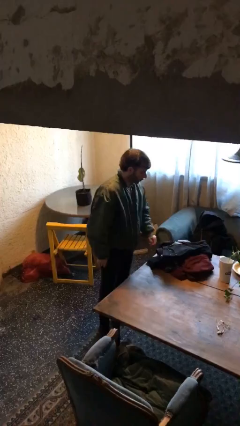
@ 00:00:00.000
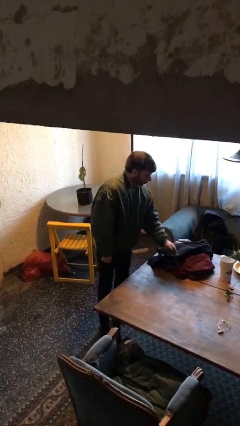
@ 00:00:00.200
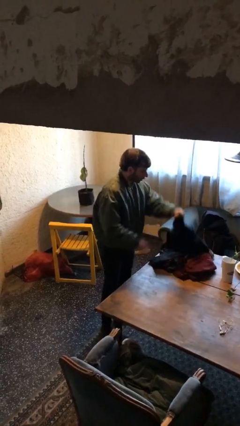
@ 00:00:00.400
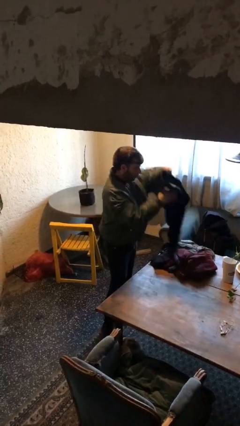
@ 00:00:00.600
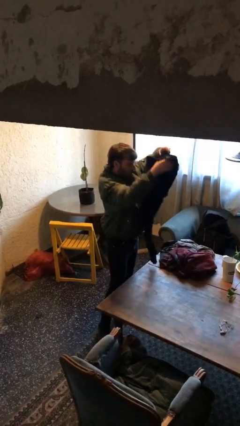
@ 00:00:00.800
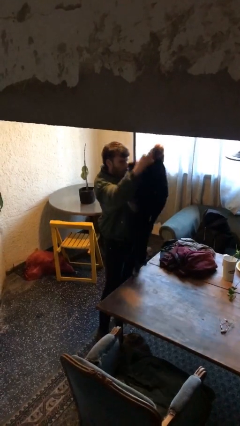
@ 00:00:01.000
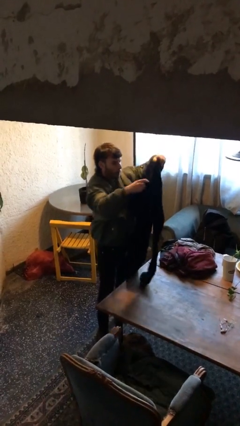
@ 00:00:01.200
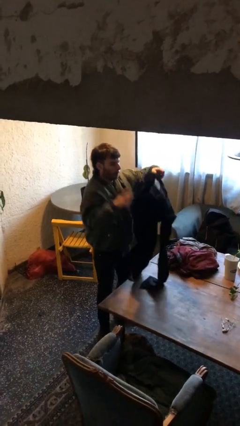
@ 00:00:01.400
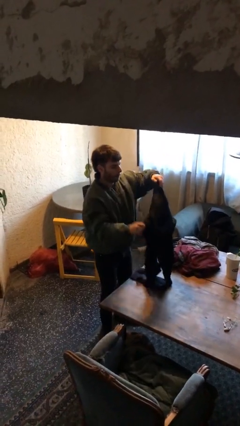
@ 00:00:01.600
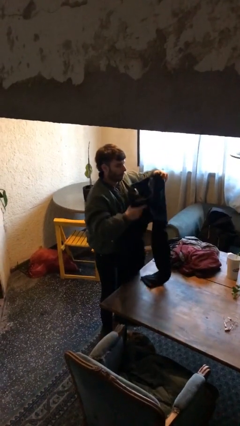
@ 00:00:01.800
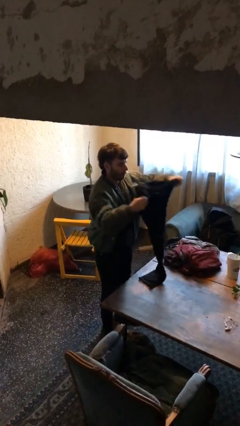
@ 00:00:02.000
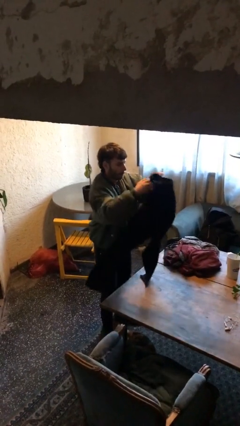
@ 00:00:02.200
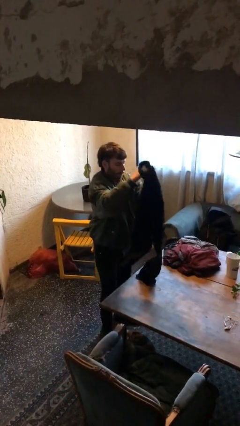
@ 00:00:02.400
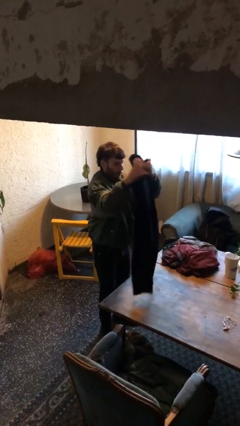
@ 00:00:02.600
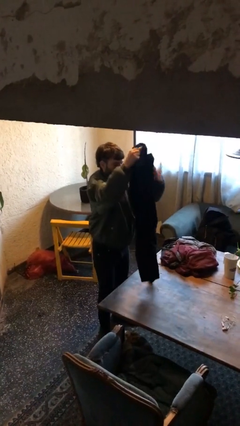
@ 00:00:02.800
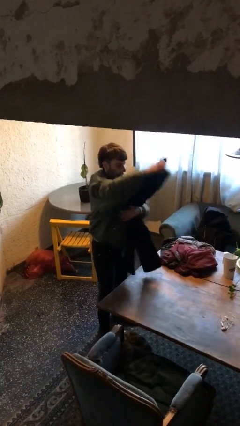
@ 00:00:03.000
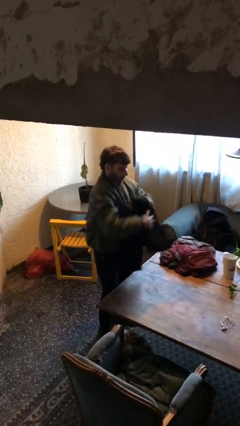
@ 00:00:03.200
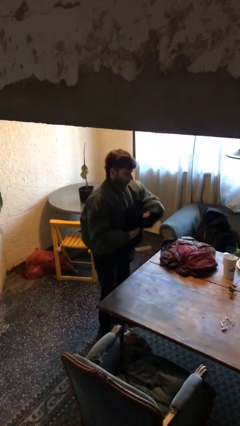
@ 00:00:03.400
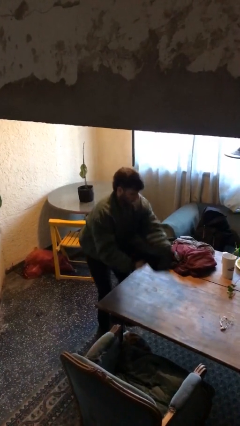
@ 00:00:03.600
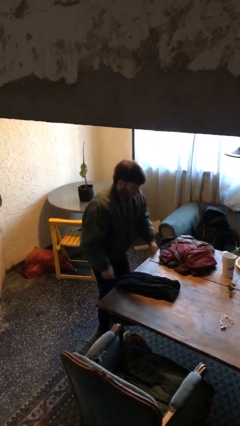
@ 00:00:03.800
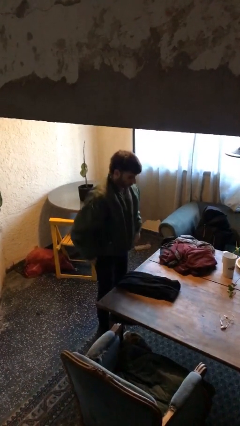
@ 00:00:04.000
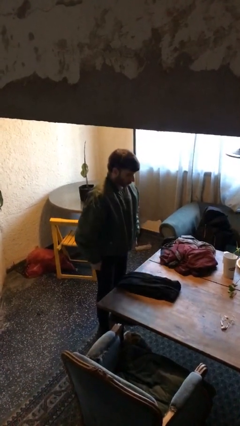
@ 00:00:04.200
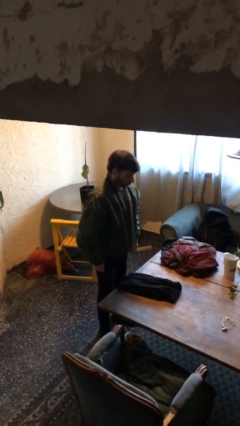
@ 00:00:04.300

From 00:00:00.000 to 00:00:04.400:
person folds pants

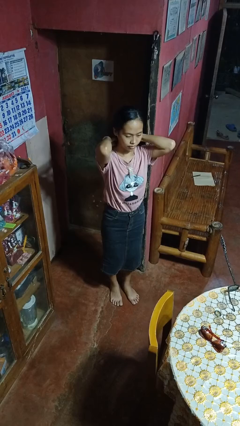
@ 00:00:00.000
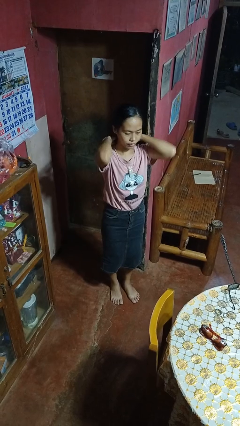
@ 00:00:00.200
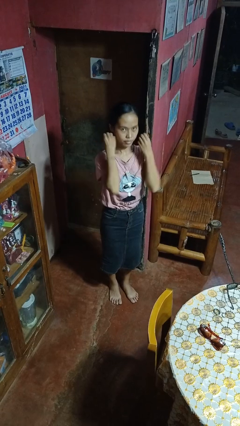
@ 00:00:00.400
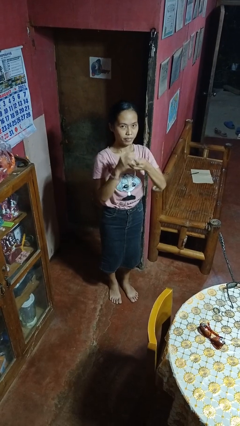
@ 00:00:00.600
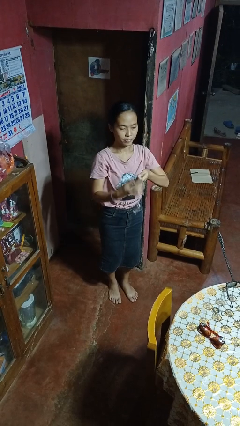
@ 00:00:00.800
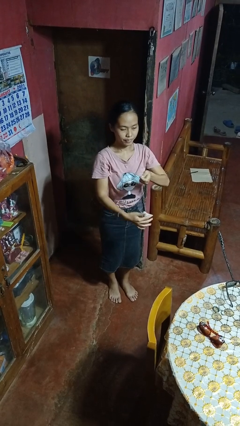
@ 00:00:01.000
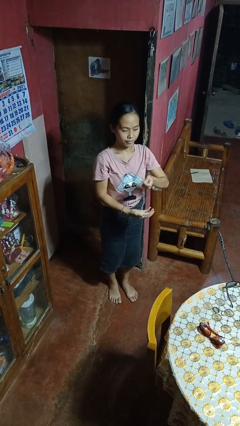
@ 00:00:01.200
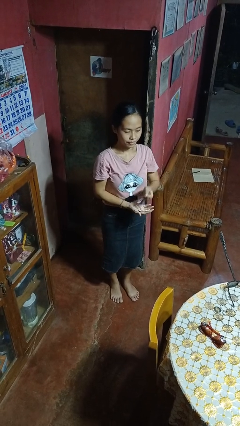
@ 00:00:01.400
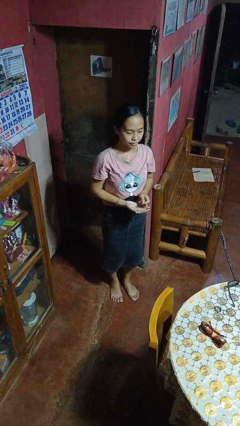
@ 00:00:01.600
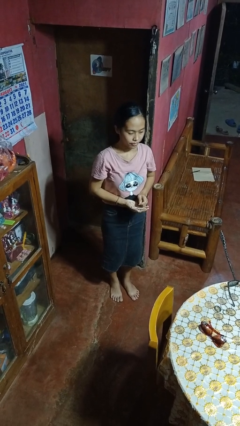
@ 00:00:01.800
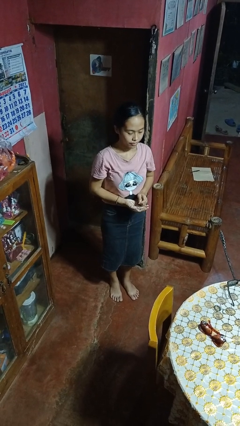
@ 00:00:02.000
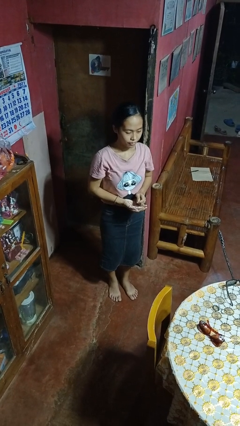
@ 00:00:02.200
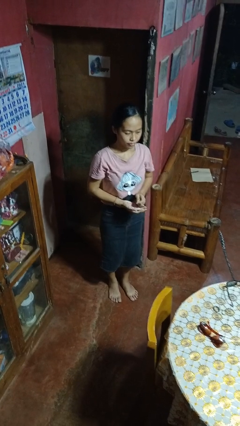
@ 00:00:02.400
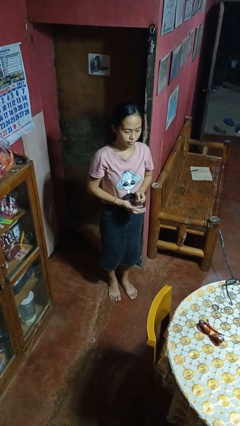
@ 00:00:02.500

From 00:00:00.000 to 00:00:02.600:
person takes off necklace

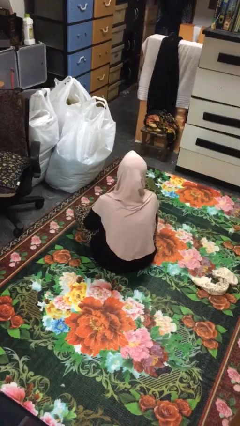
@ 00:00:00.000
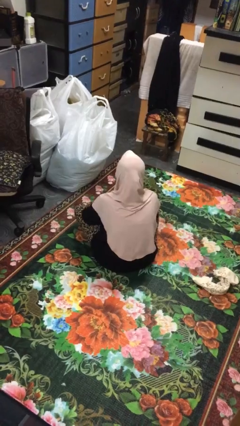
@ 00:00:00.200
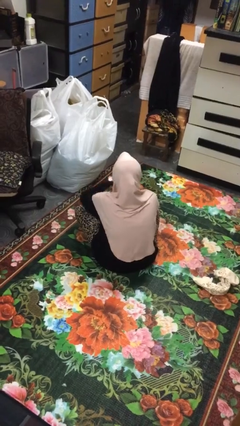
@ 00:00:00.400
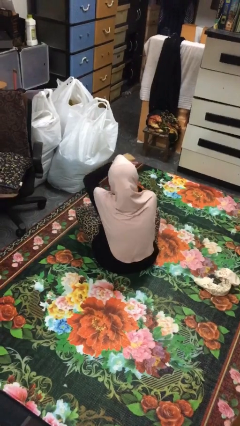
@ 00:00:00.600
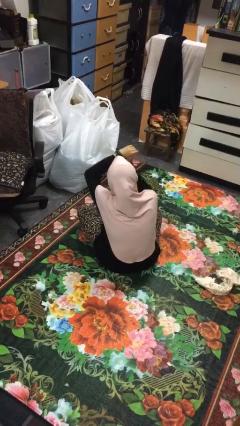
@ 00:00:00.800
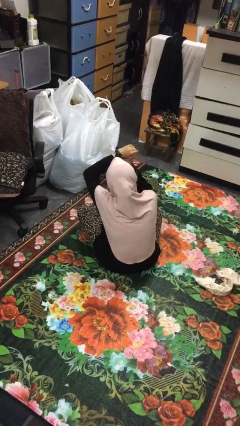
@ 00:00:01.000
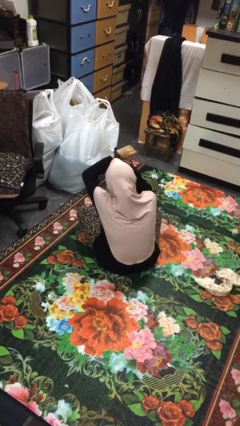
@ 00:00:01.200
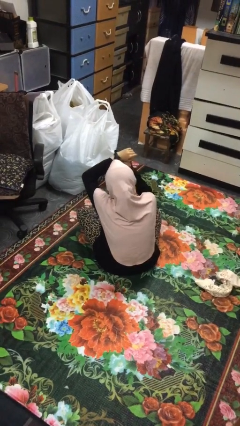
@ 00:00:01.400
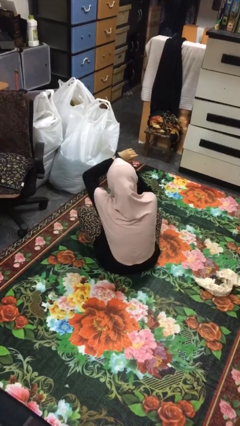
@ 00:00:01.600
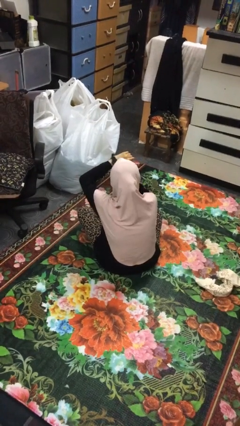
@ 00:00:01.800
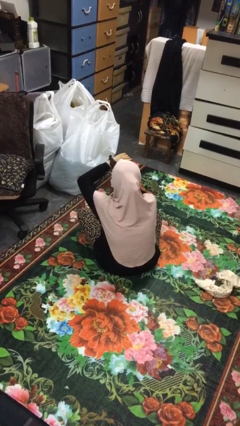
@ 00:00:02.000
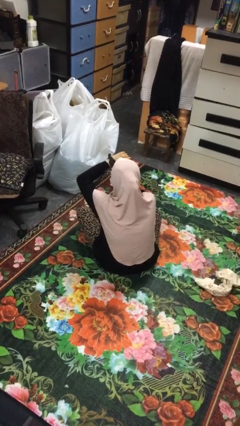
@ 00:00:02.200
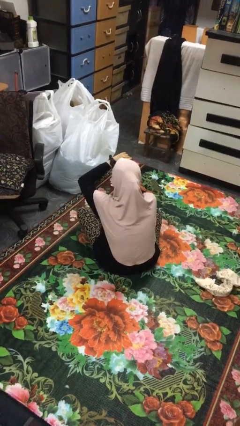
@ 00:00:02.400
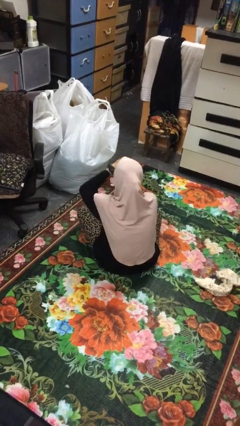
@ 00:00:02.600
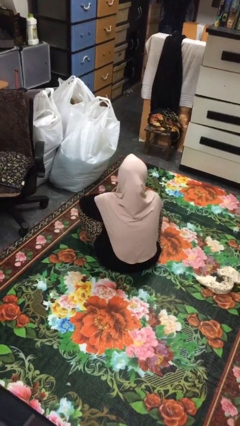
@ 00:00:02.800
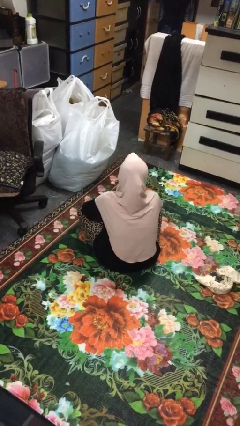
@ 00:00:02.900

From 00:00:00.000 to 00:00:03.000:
person looks at wristwatch

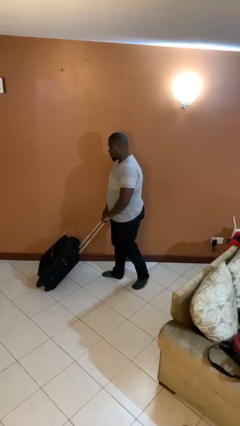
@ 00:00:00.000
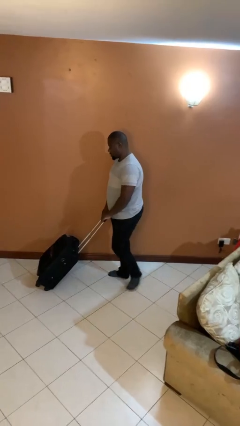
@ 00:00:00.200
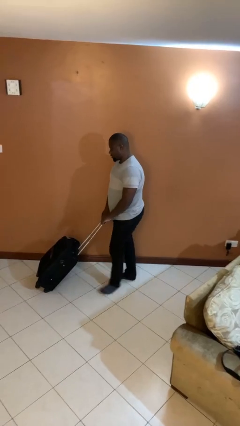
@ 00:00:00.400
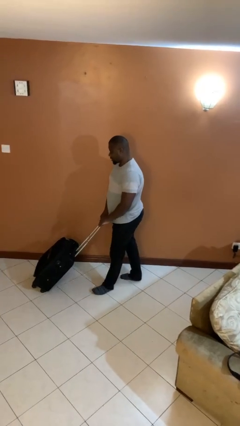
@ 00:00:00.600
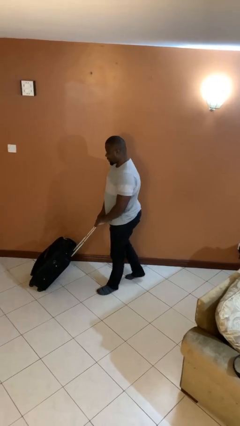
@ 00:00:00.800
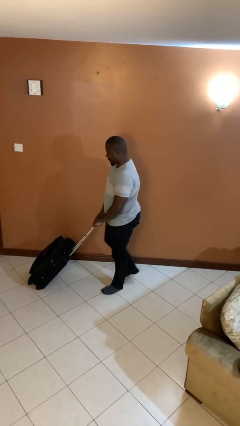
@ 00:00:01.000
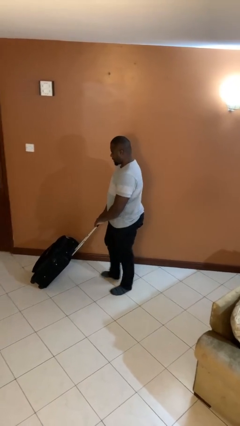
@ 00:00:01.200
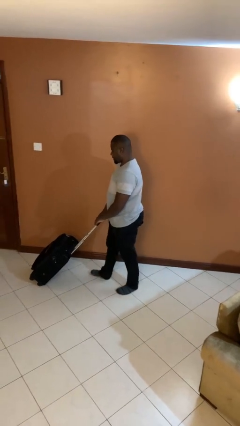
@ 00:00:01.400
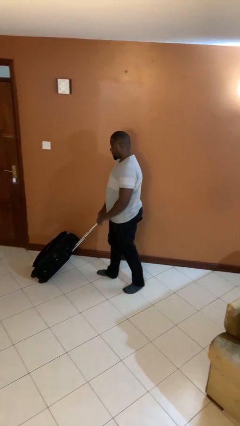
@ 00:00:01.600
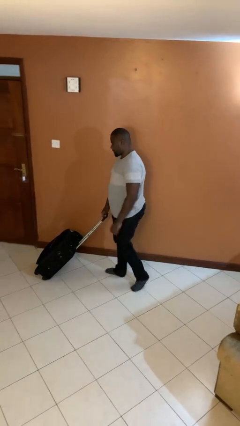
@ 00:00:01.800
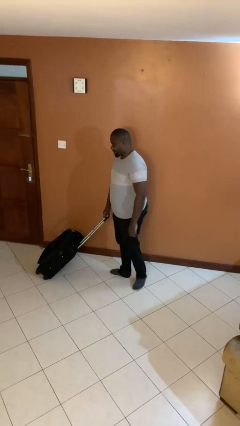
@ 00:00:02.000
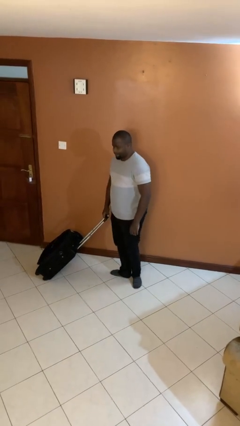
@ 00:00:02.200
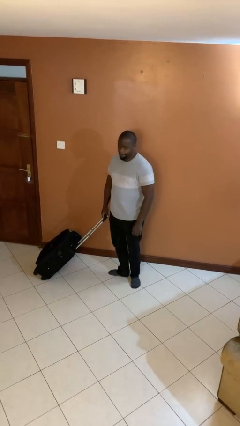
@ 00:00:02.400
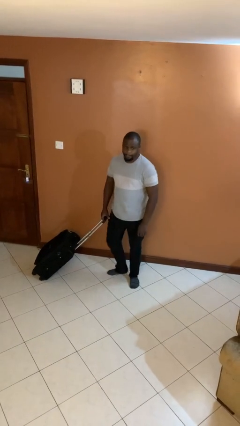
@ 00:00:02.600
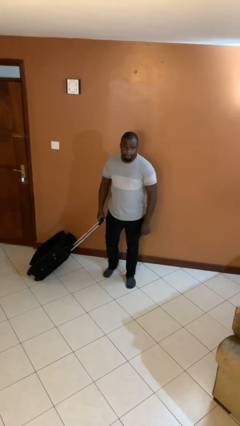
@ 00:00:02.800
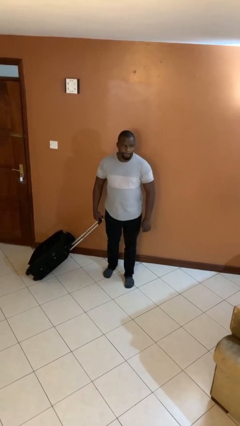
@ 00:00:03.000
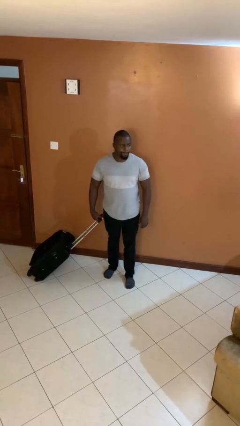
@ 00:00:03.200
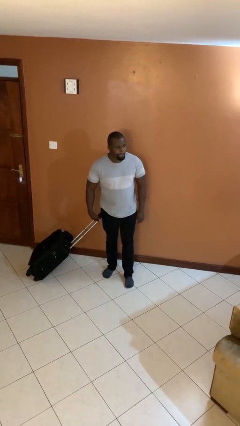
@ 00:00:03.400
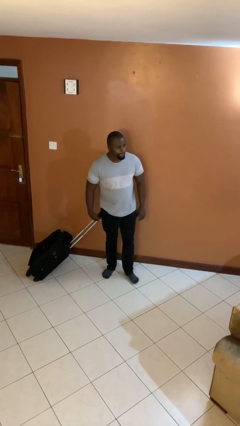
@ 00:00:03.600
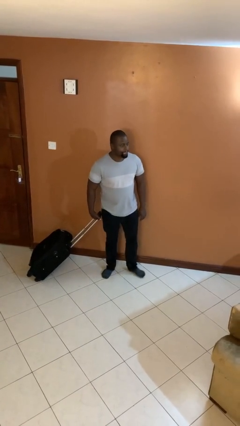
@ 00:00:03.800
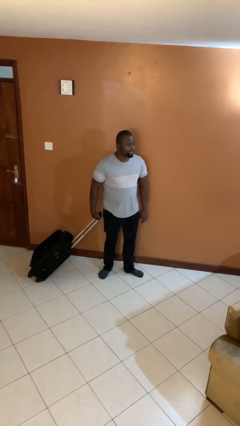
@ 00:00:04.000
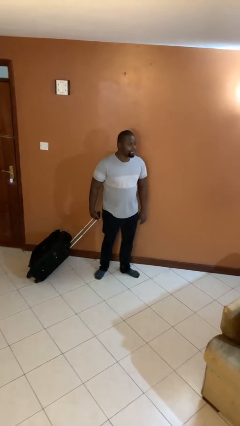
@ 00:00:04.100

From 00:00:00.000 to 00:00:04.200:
person pushes wheeled cart

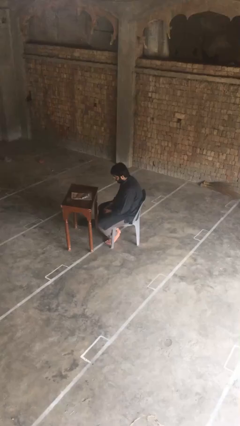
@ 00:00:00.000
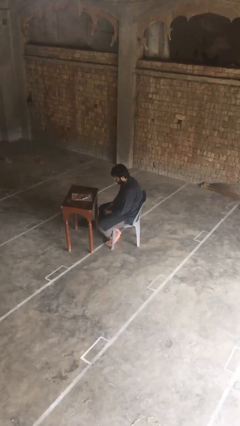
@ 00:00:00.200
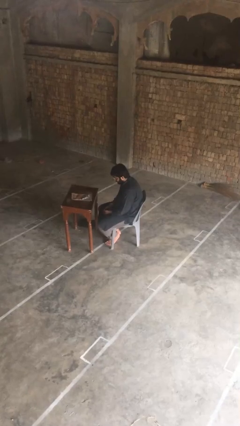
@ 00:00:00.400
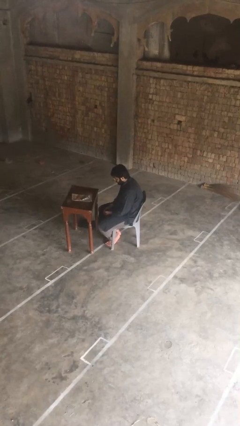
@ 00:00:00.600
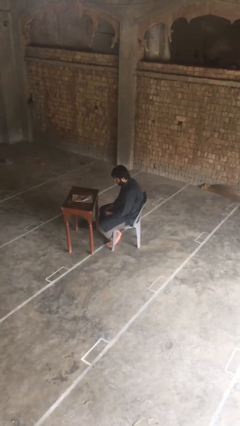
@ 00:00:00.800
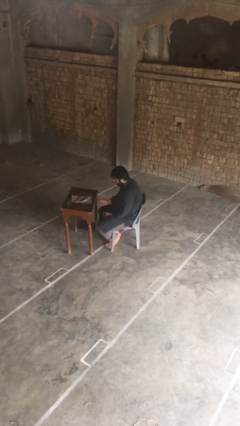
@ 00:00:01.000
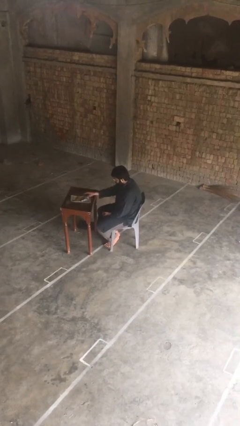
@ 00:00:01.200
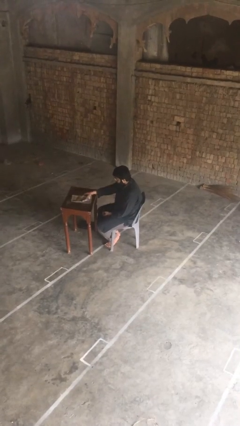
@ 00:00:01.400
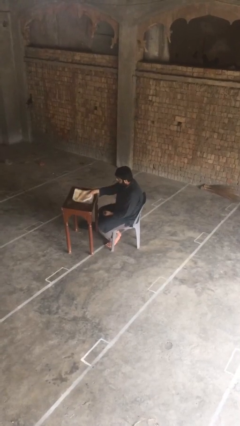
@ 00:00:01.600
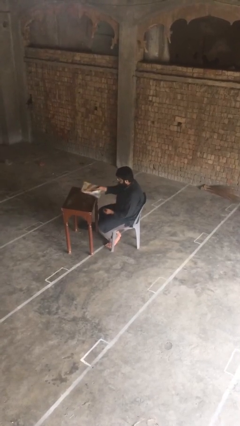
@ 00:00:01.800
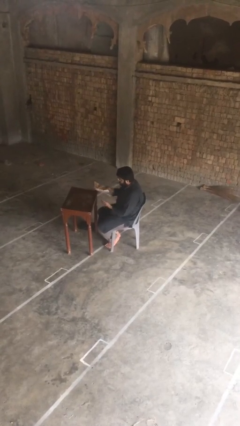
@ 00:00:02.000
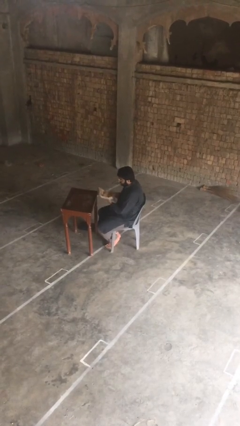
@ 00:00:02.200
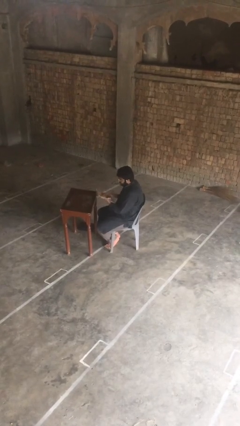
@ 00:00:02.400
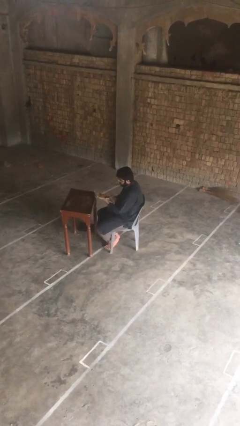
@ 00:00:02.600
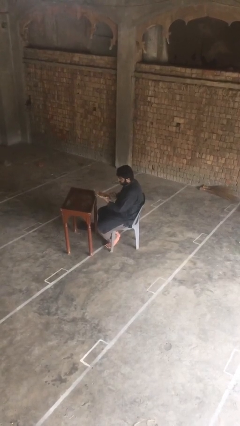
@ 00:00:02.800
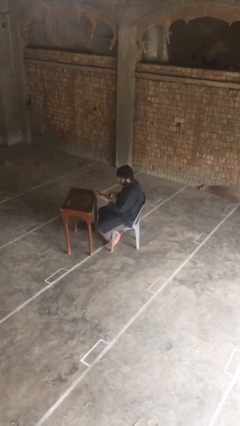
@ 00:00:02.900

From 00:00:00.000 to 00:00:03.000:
person picks up object from table
